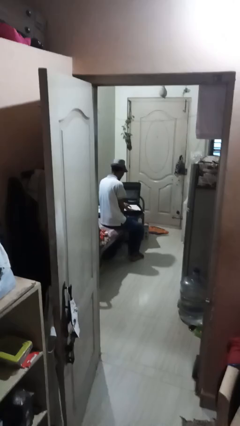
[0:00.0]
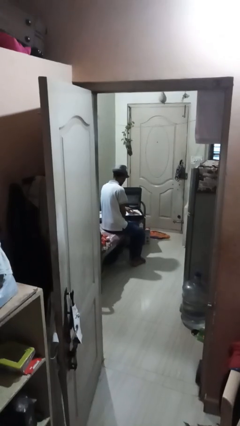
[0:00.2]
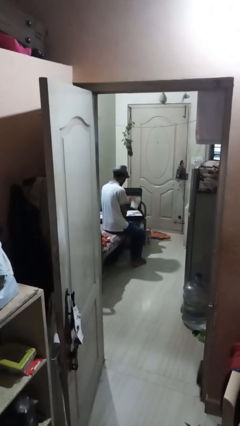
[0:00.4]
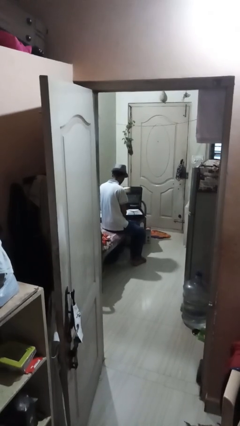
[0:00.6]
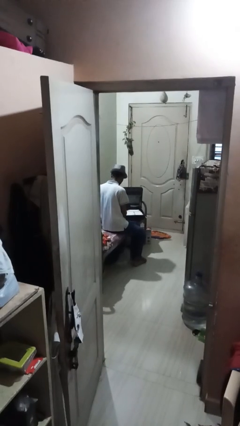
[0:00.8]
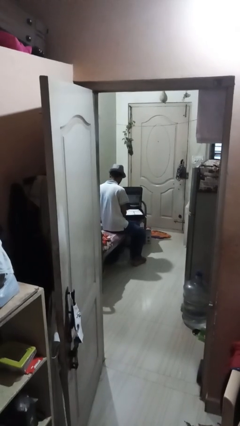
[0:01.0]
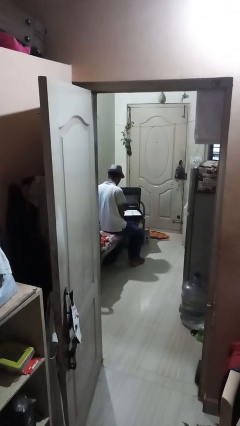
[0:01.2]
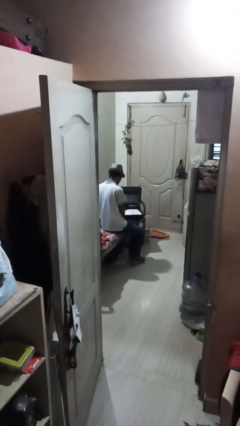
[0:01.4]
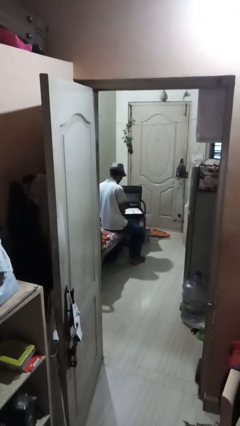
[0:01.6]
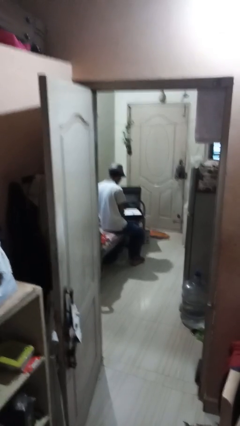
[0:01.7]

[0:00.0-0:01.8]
person unloads clothes from suitcase

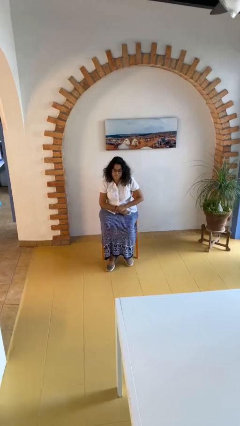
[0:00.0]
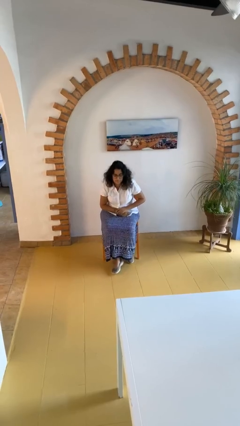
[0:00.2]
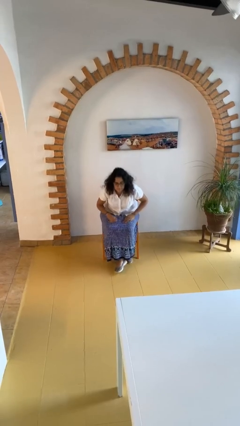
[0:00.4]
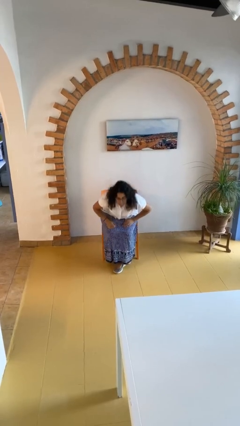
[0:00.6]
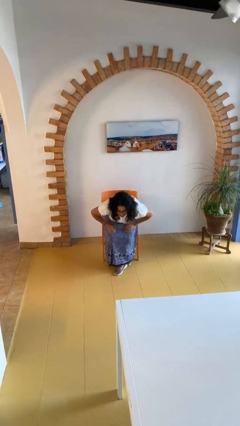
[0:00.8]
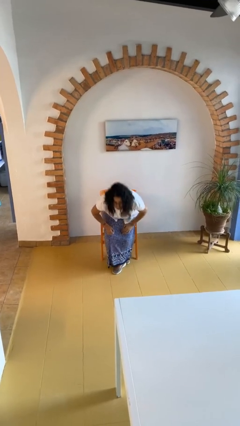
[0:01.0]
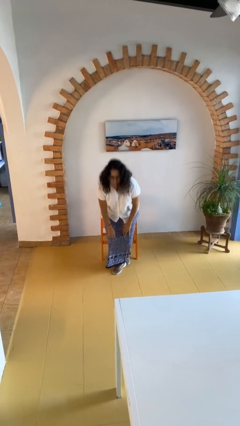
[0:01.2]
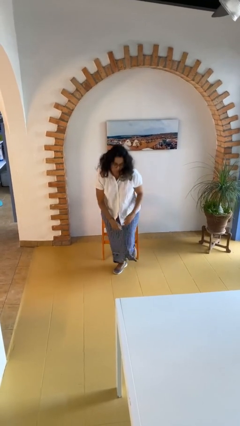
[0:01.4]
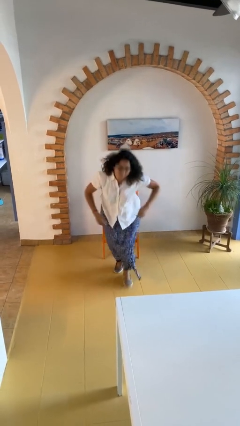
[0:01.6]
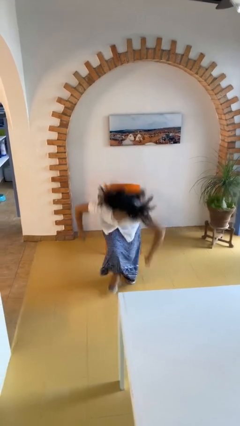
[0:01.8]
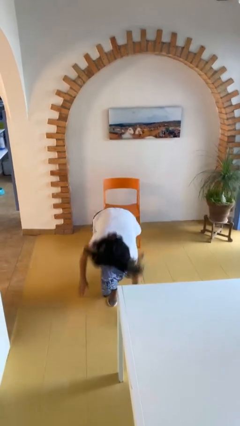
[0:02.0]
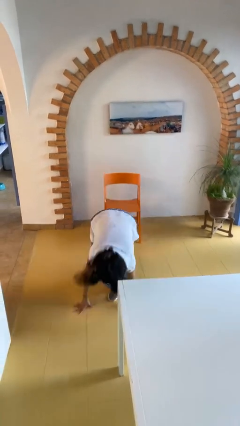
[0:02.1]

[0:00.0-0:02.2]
person falls from chair

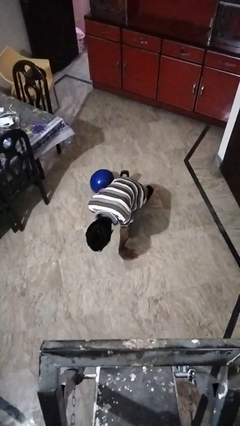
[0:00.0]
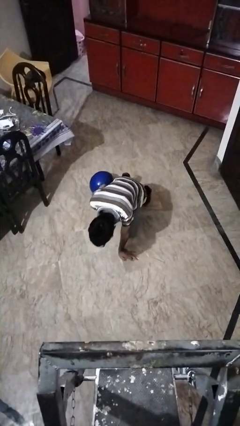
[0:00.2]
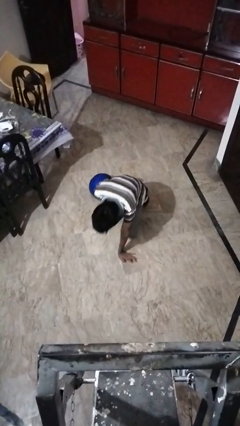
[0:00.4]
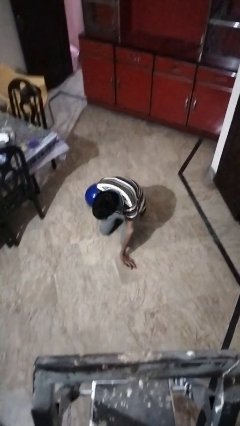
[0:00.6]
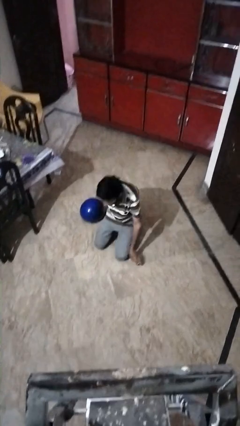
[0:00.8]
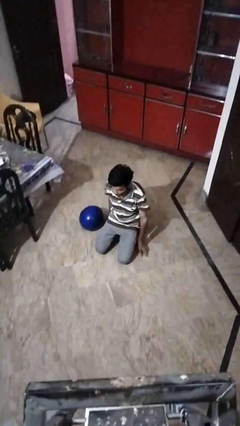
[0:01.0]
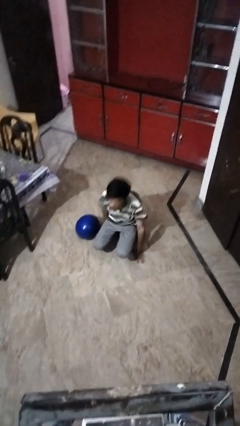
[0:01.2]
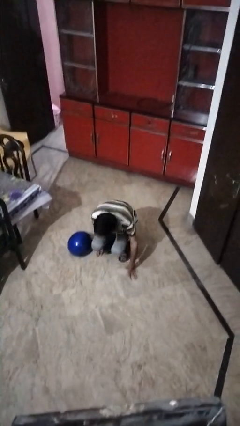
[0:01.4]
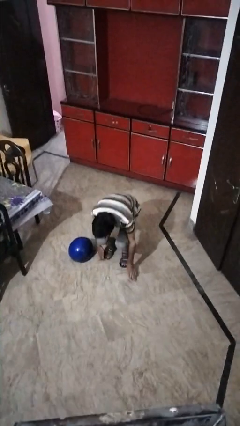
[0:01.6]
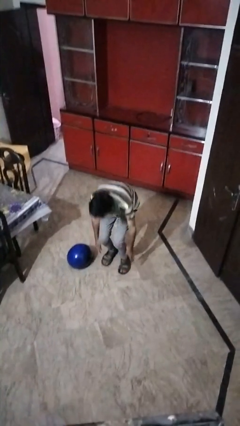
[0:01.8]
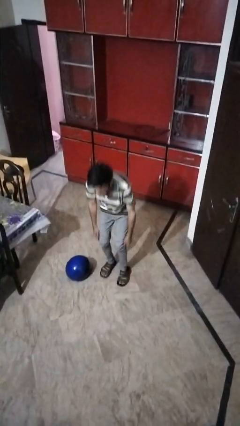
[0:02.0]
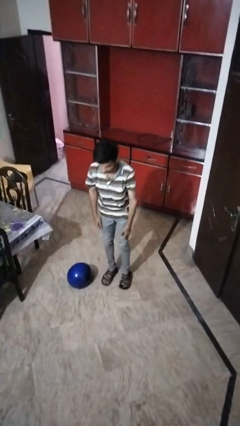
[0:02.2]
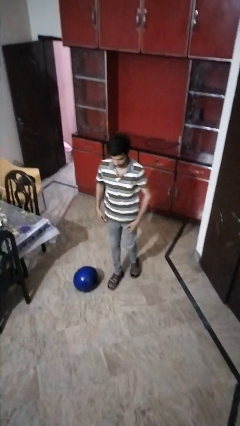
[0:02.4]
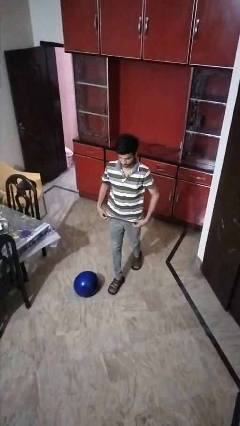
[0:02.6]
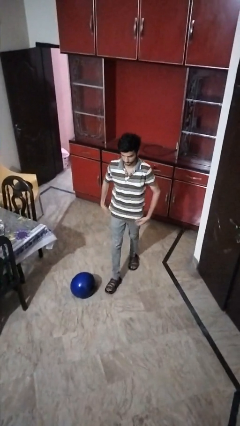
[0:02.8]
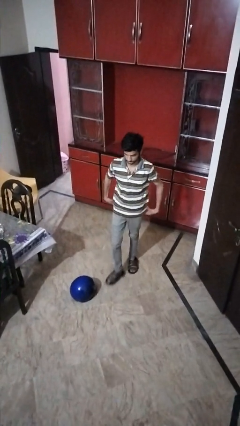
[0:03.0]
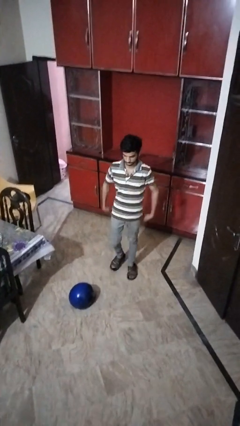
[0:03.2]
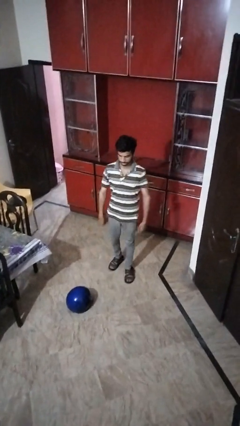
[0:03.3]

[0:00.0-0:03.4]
person stands up from floor

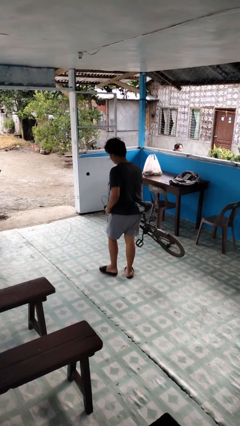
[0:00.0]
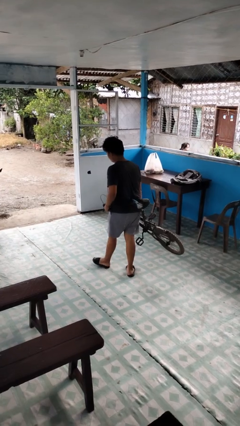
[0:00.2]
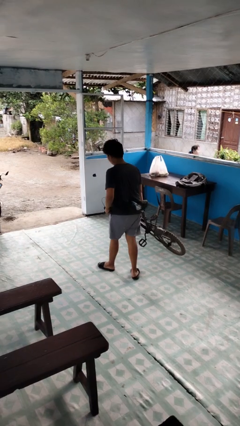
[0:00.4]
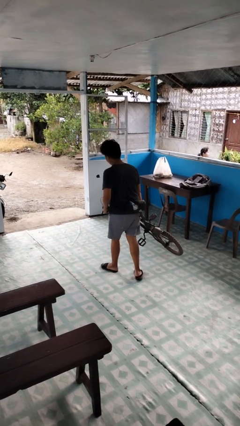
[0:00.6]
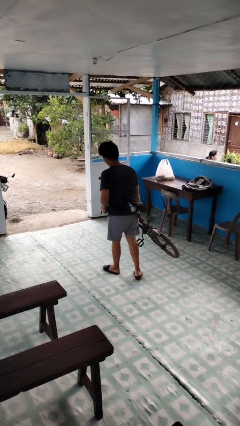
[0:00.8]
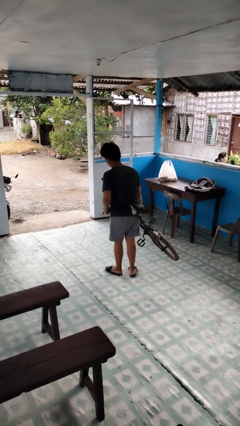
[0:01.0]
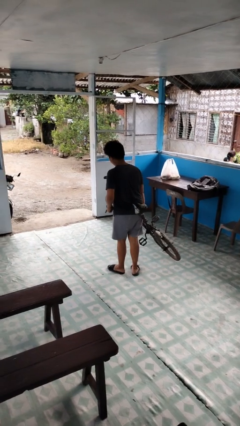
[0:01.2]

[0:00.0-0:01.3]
person carries bicycle

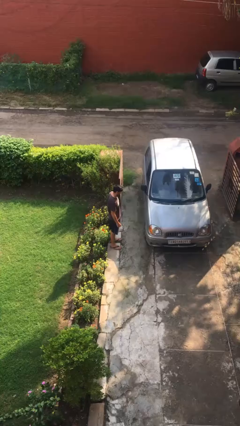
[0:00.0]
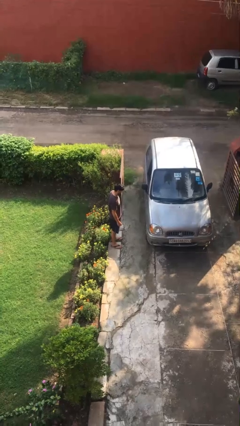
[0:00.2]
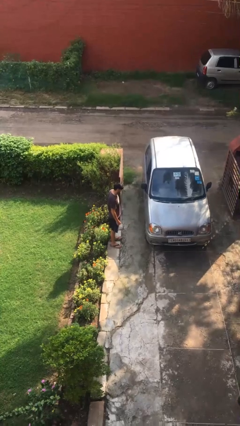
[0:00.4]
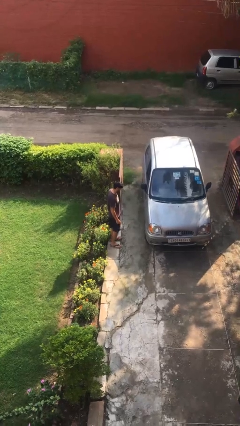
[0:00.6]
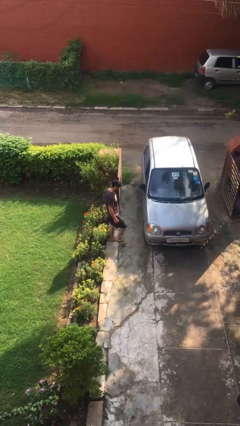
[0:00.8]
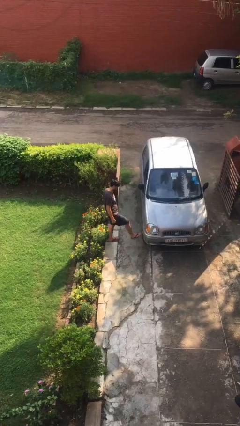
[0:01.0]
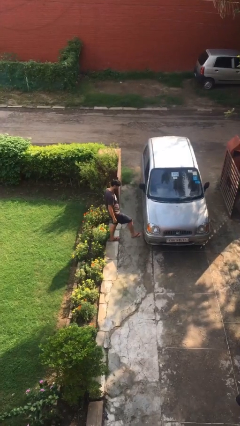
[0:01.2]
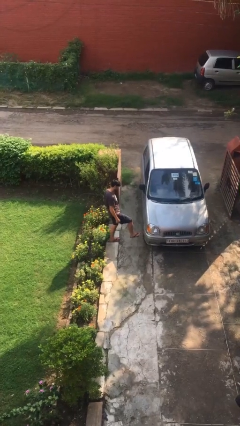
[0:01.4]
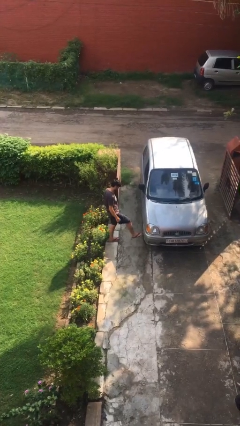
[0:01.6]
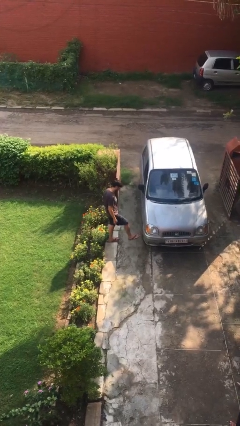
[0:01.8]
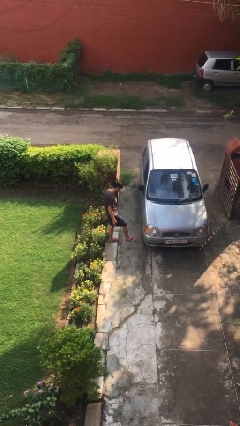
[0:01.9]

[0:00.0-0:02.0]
person kicks car tires

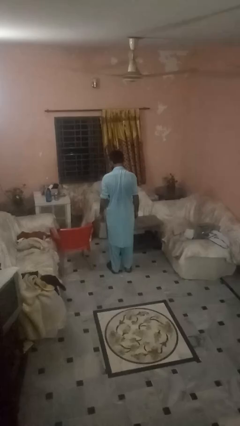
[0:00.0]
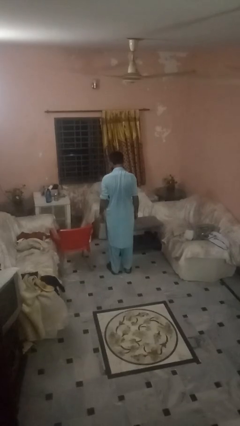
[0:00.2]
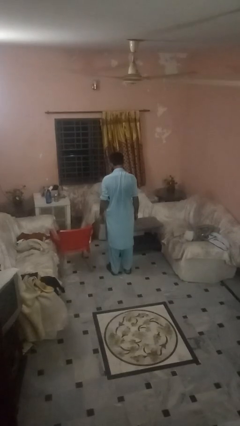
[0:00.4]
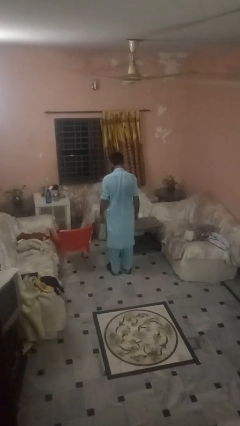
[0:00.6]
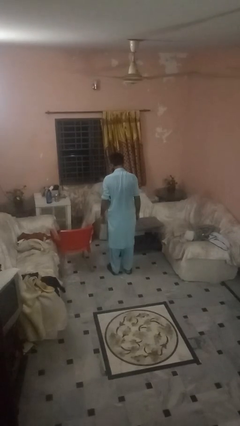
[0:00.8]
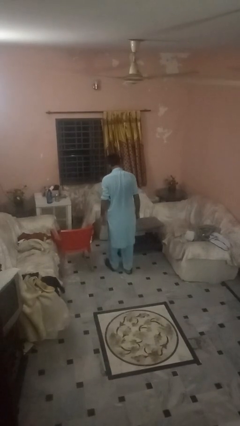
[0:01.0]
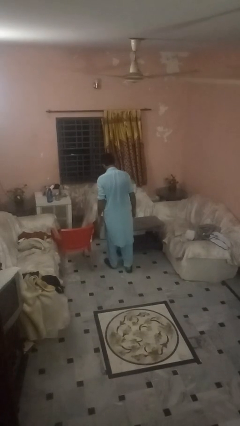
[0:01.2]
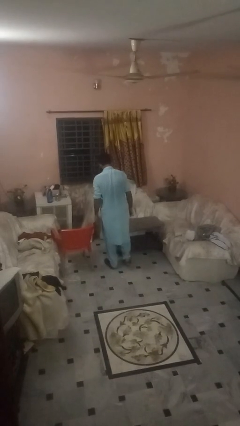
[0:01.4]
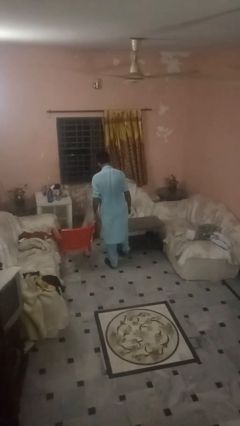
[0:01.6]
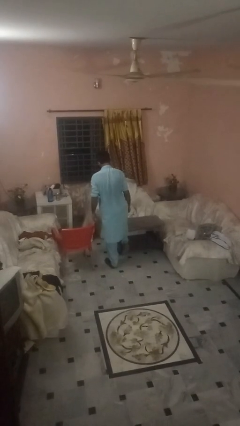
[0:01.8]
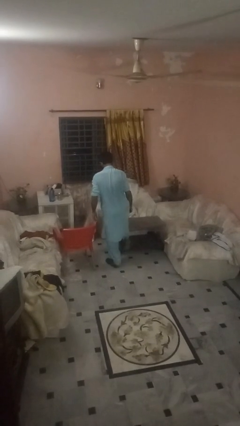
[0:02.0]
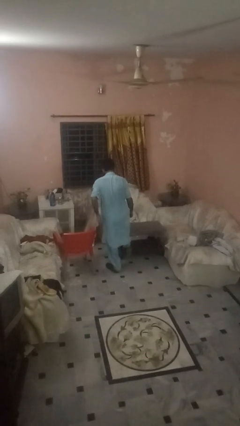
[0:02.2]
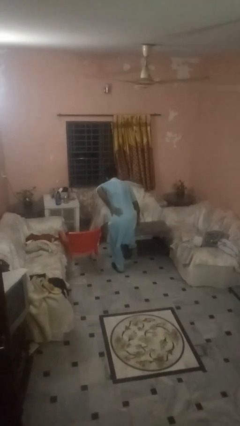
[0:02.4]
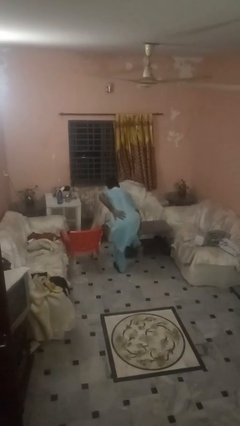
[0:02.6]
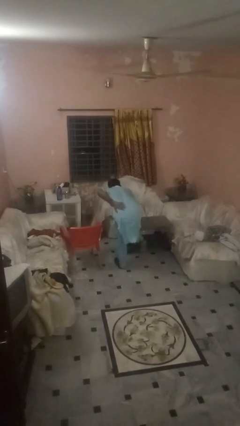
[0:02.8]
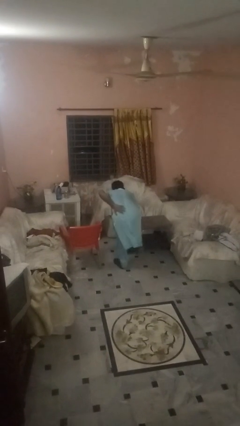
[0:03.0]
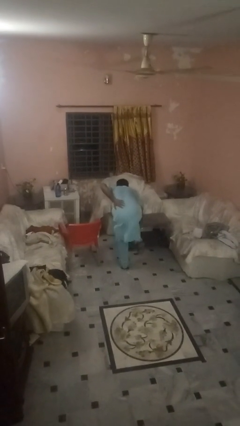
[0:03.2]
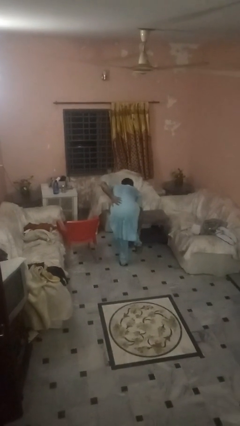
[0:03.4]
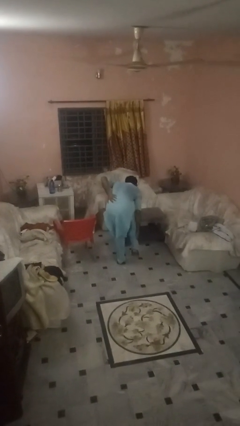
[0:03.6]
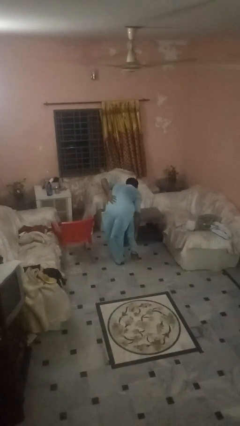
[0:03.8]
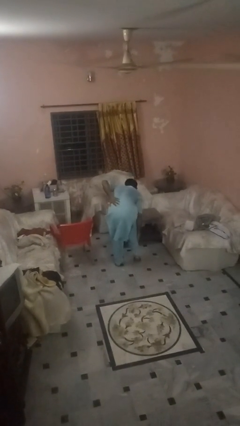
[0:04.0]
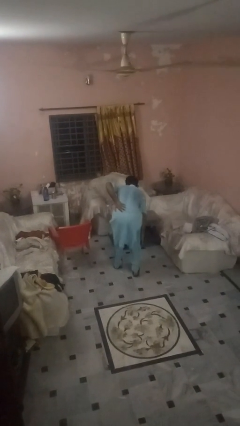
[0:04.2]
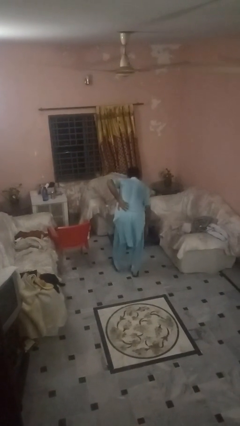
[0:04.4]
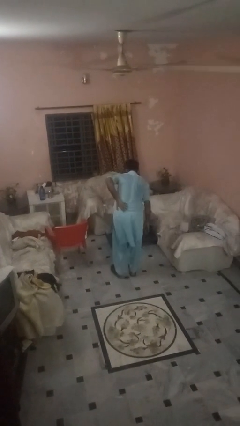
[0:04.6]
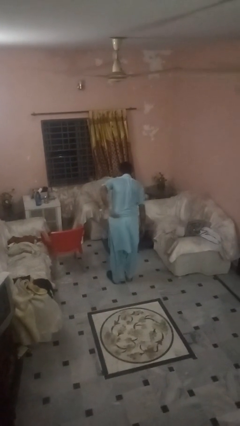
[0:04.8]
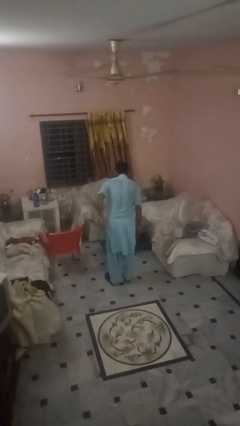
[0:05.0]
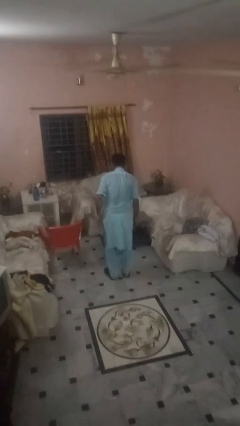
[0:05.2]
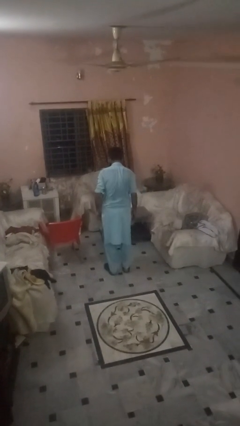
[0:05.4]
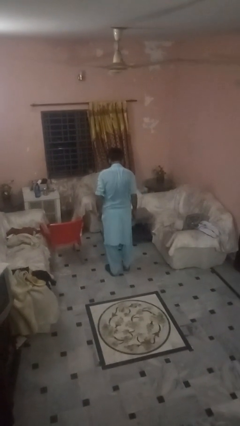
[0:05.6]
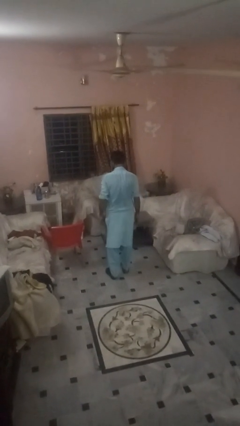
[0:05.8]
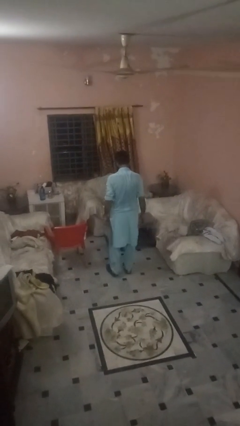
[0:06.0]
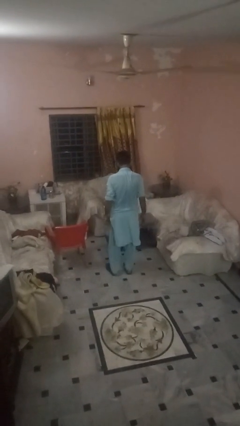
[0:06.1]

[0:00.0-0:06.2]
person bumps into table

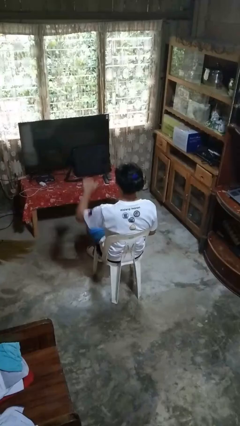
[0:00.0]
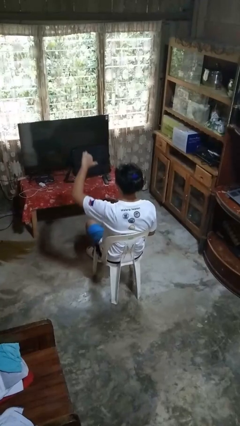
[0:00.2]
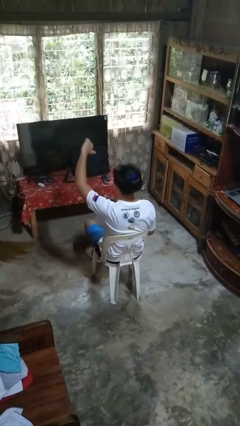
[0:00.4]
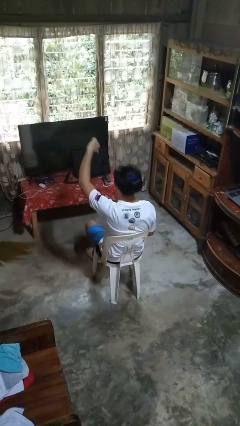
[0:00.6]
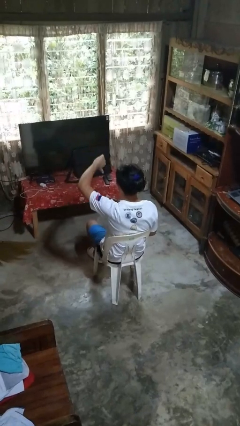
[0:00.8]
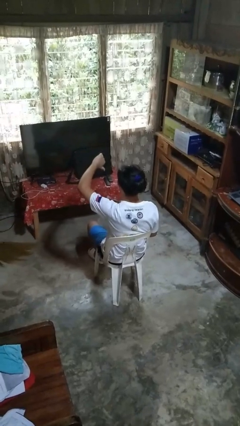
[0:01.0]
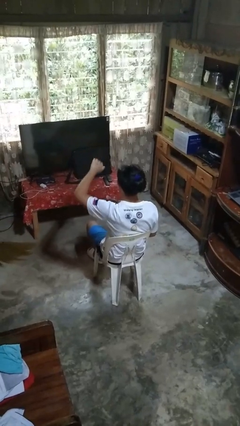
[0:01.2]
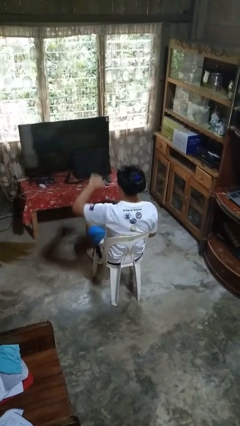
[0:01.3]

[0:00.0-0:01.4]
person gestures thumbs down
